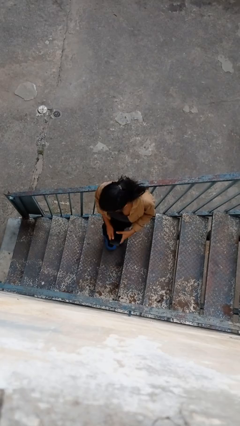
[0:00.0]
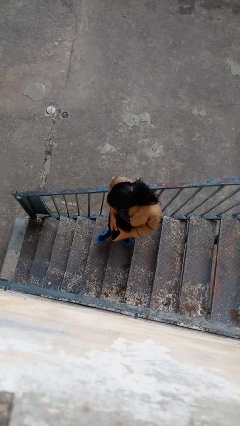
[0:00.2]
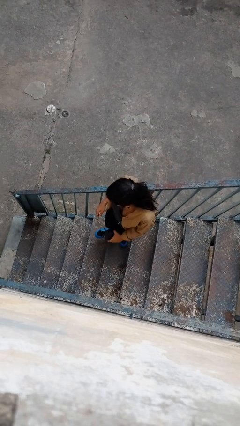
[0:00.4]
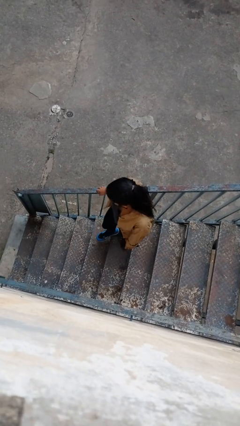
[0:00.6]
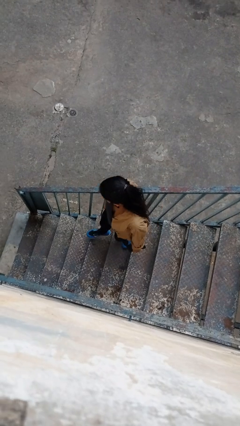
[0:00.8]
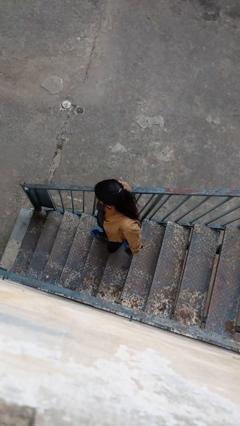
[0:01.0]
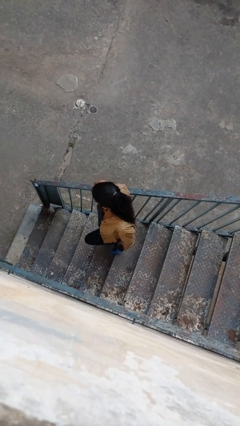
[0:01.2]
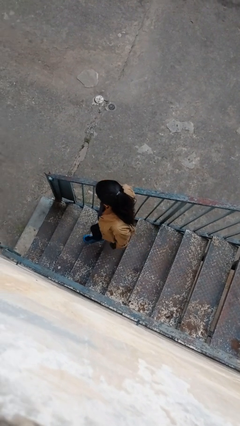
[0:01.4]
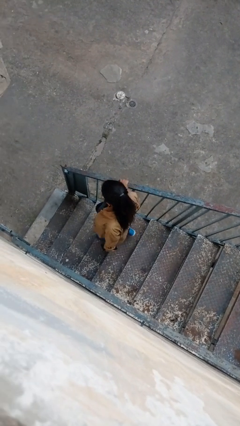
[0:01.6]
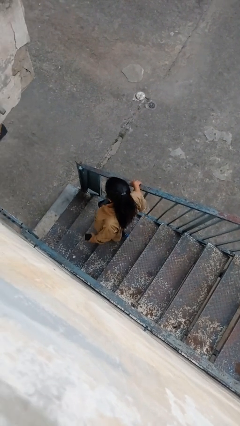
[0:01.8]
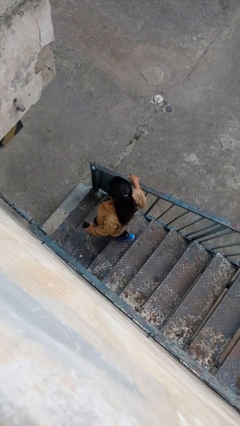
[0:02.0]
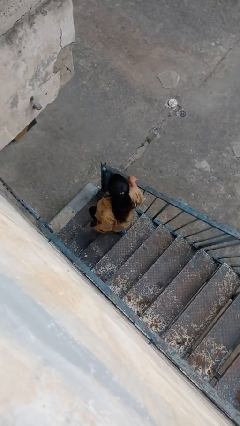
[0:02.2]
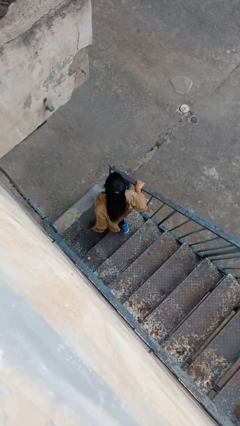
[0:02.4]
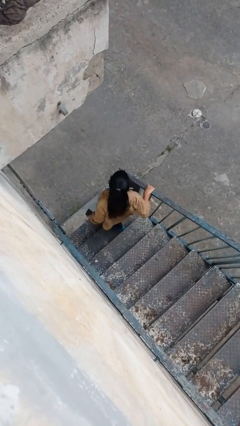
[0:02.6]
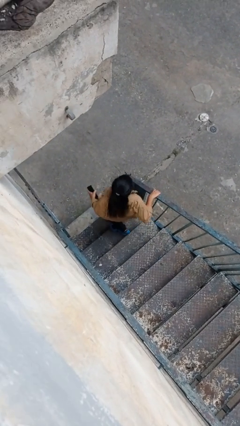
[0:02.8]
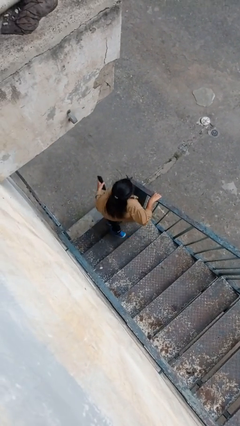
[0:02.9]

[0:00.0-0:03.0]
person climbs down stairs

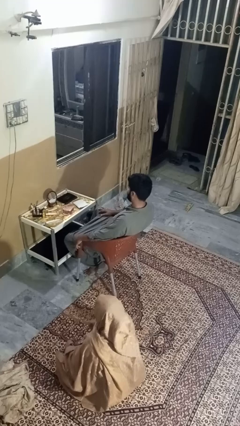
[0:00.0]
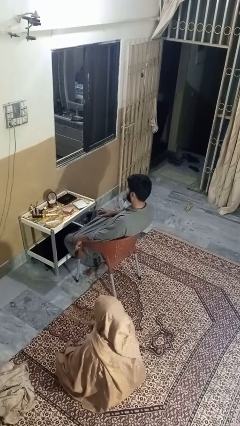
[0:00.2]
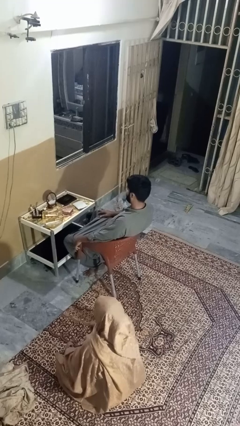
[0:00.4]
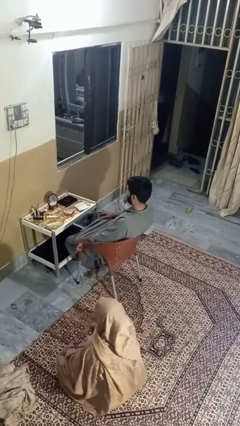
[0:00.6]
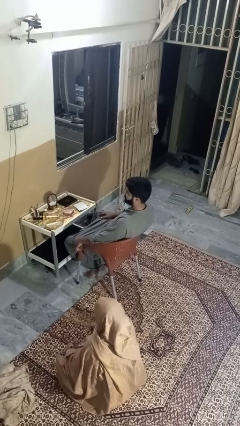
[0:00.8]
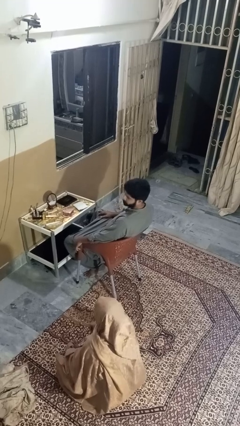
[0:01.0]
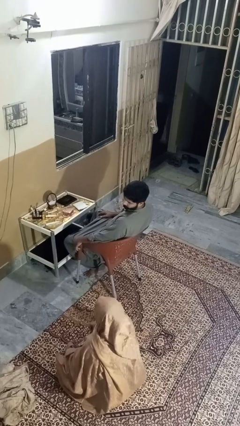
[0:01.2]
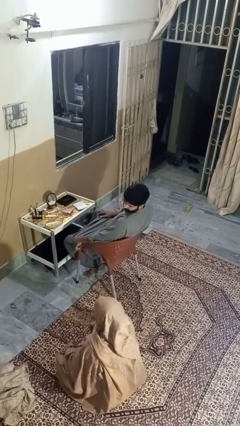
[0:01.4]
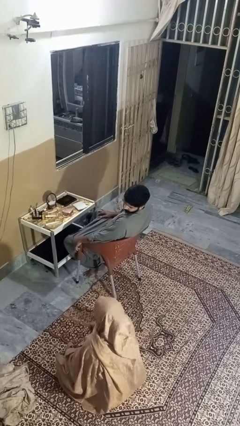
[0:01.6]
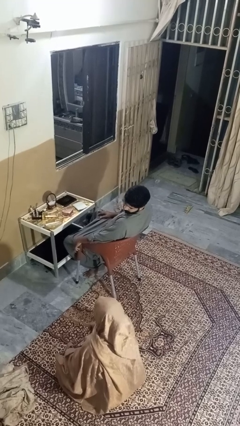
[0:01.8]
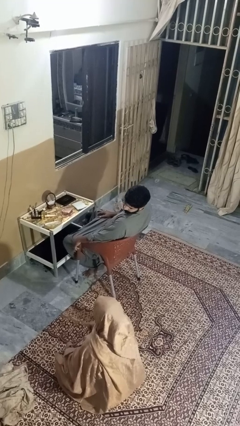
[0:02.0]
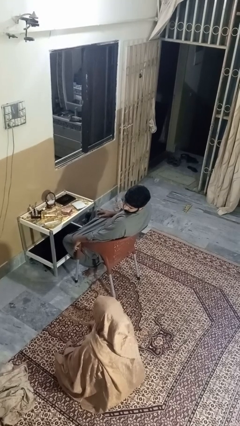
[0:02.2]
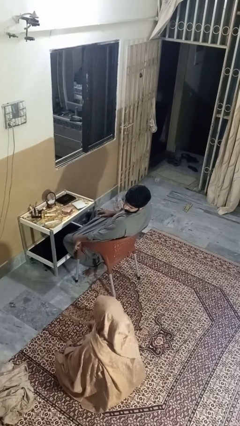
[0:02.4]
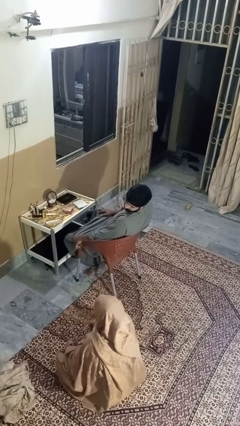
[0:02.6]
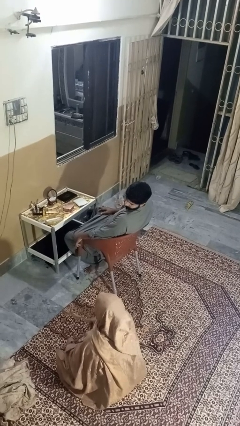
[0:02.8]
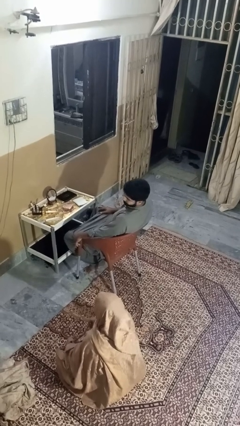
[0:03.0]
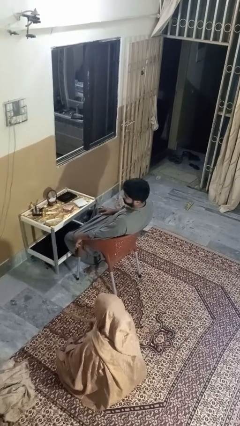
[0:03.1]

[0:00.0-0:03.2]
person looks over shoulder

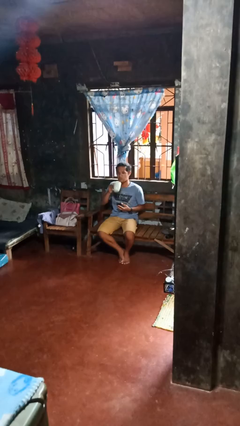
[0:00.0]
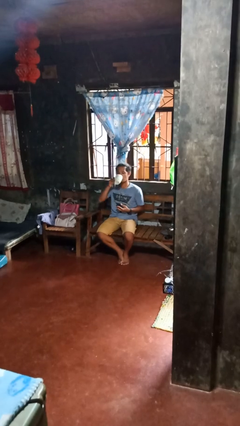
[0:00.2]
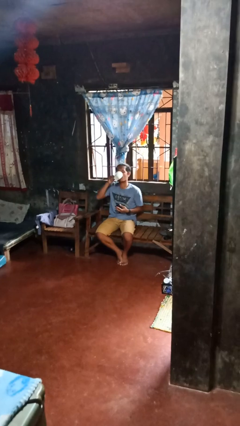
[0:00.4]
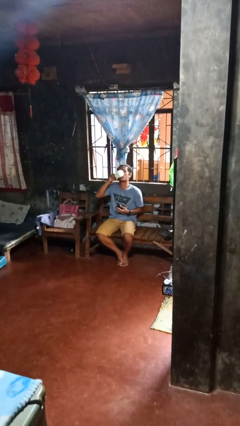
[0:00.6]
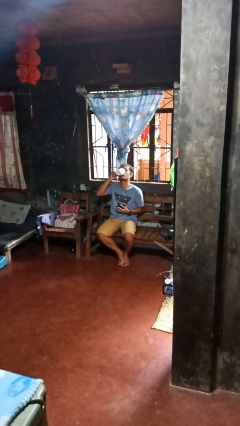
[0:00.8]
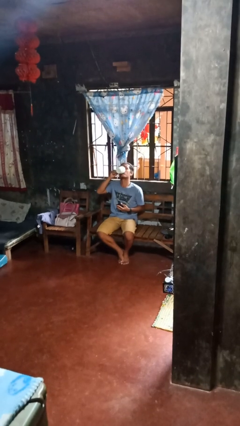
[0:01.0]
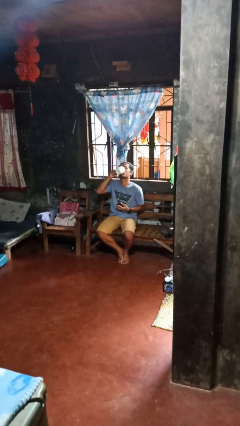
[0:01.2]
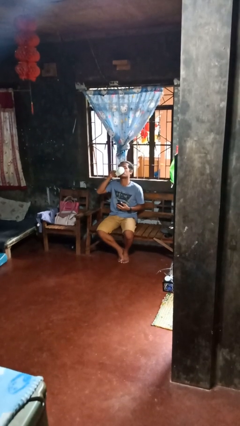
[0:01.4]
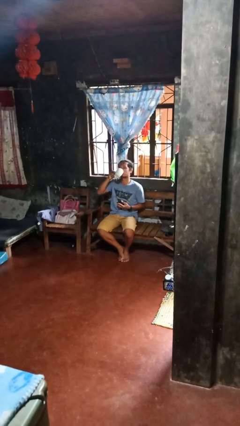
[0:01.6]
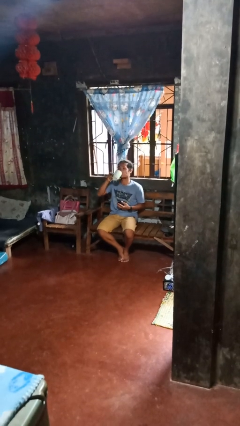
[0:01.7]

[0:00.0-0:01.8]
person drinks from cup

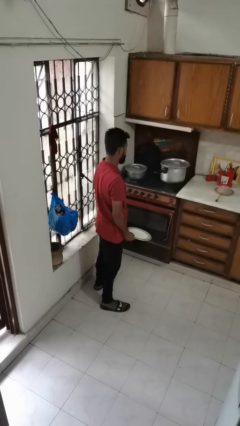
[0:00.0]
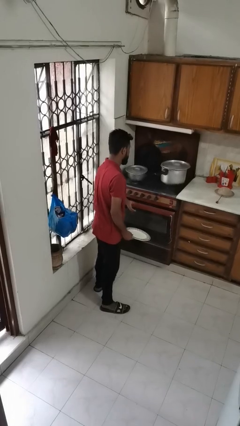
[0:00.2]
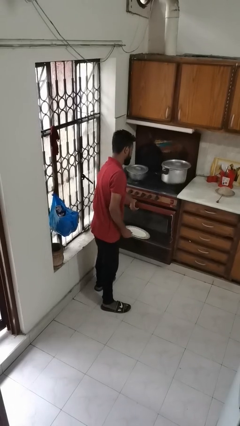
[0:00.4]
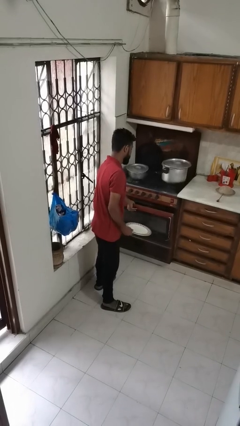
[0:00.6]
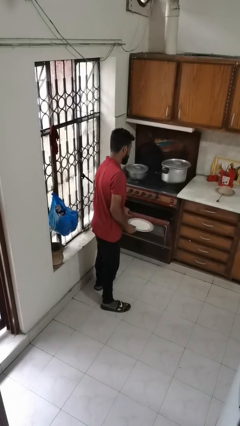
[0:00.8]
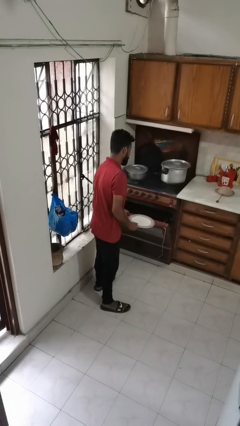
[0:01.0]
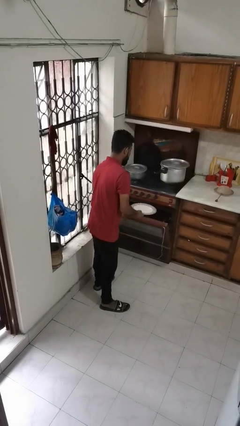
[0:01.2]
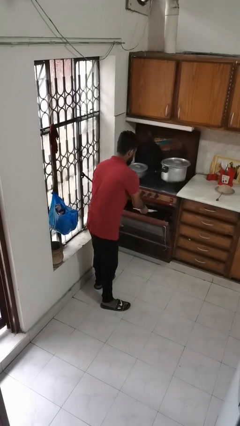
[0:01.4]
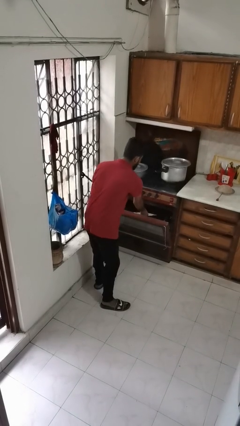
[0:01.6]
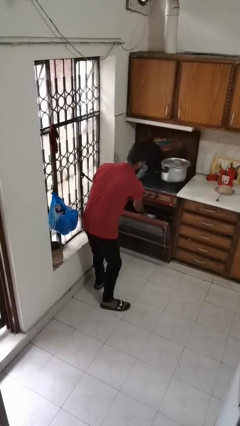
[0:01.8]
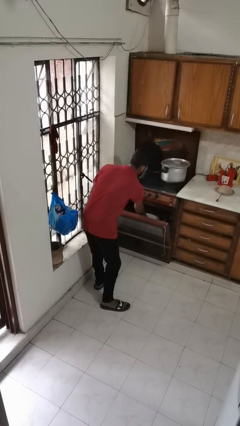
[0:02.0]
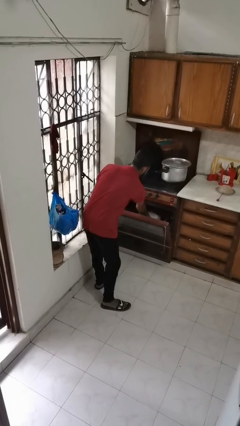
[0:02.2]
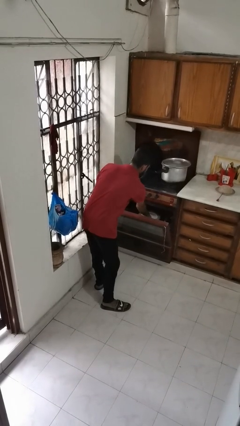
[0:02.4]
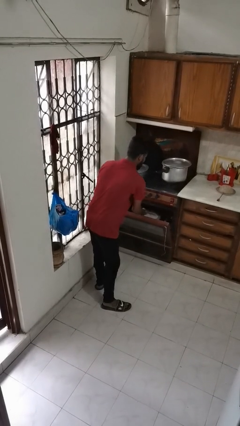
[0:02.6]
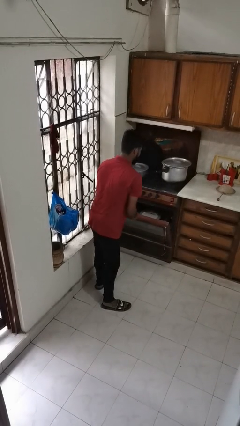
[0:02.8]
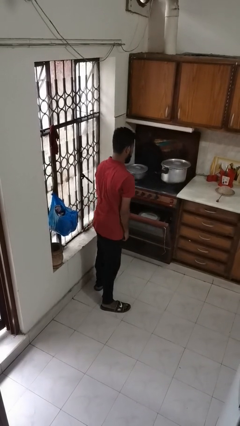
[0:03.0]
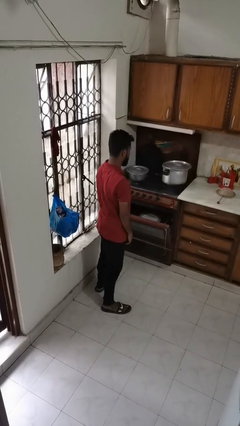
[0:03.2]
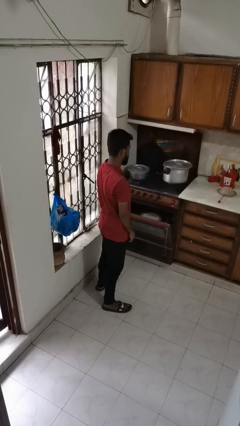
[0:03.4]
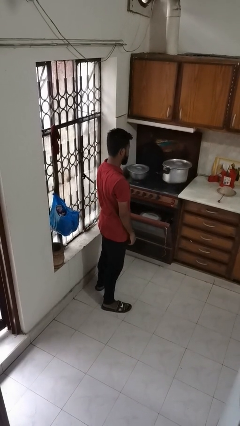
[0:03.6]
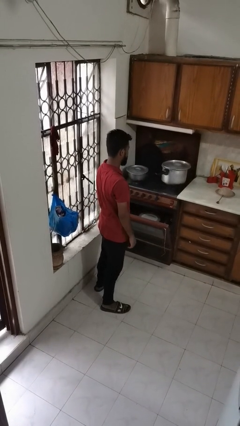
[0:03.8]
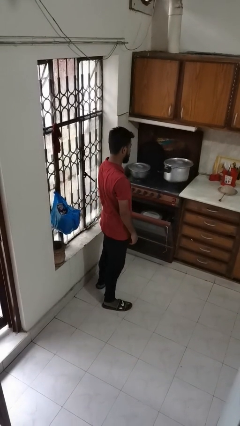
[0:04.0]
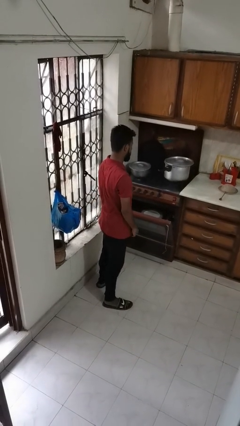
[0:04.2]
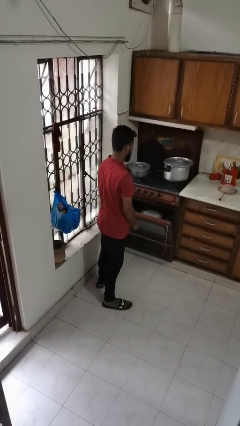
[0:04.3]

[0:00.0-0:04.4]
person puts object into oven

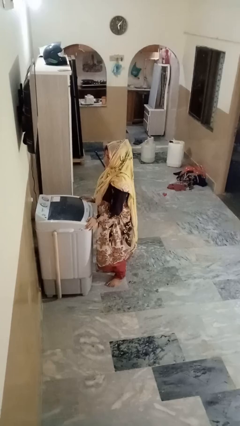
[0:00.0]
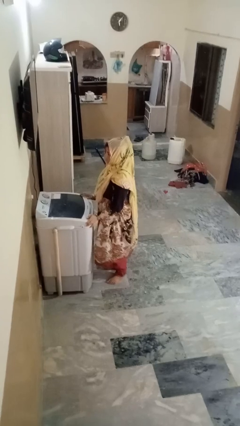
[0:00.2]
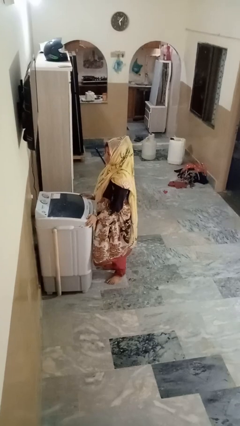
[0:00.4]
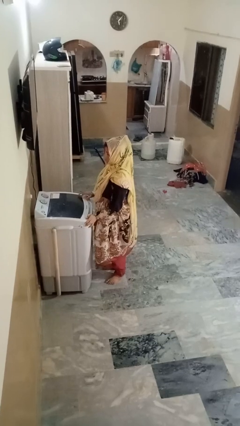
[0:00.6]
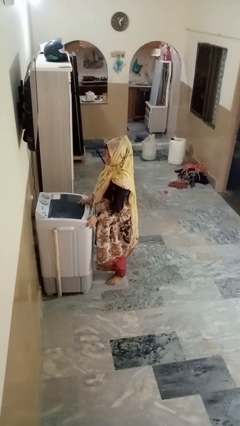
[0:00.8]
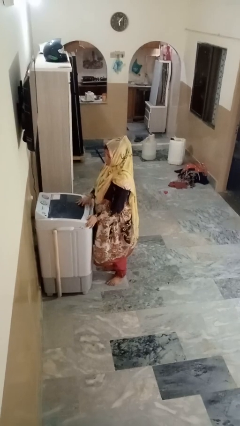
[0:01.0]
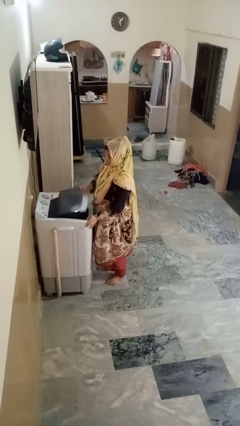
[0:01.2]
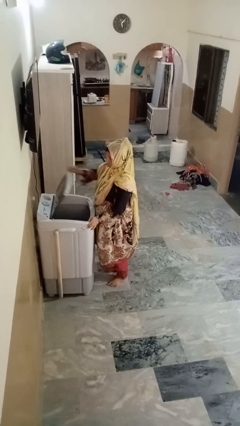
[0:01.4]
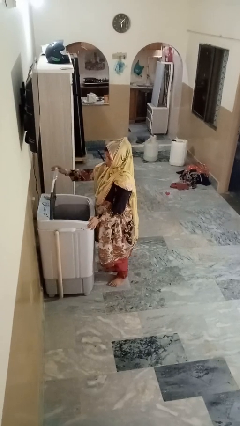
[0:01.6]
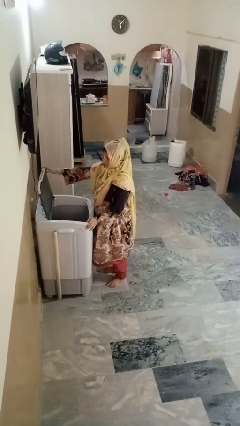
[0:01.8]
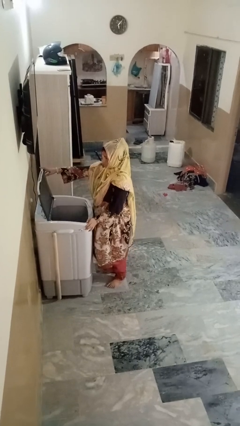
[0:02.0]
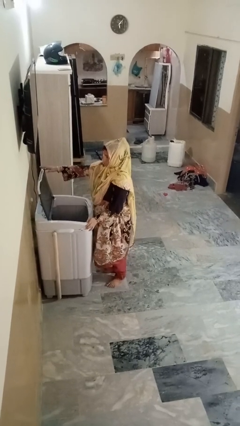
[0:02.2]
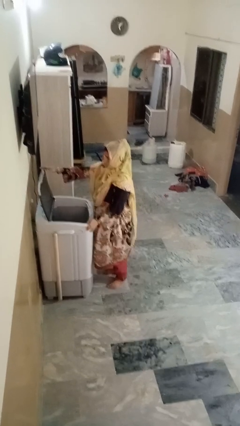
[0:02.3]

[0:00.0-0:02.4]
person opens clothes washer

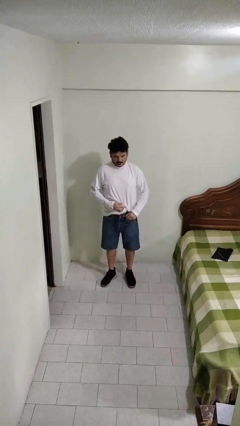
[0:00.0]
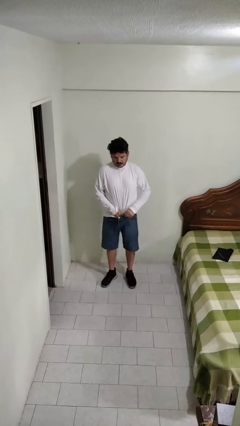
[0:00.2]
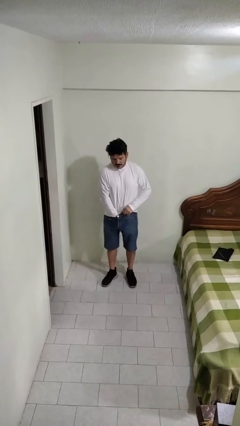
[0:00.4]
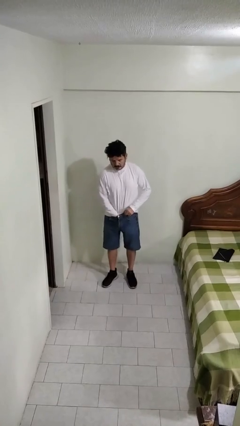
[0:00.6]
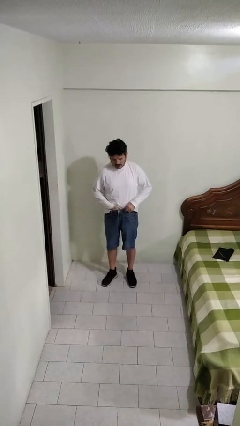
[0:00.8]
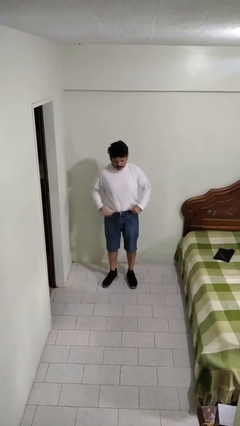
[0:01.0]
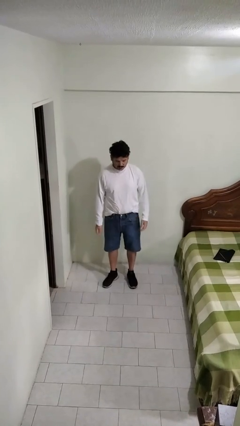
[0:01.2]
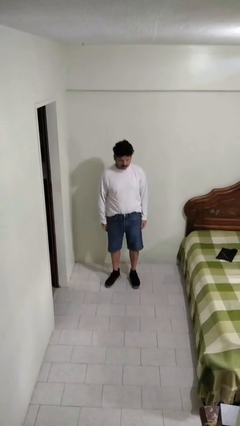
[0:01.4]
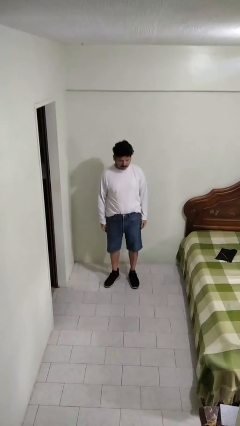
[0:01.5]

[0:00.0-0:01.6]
person tucks in shirt

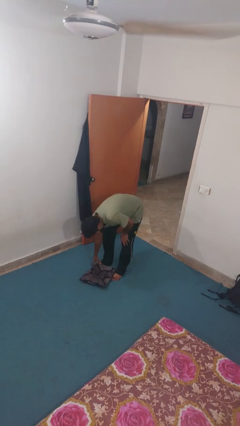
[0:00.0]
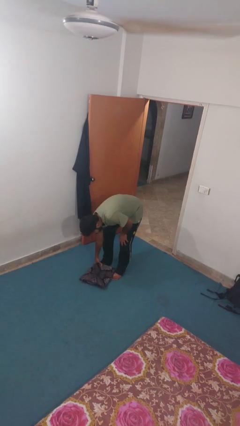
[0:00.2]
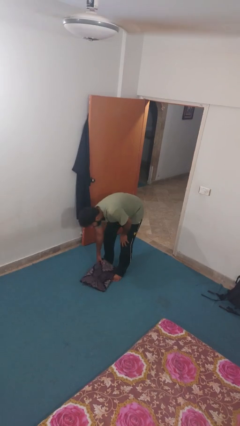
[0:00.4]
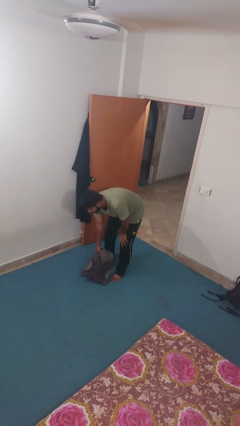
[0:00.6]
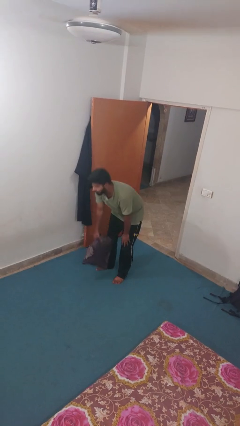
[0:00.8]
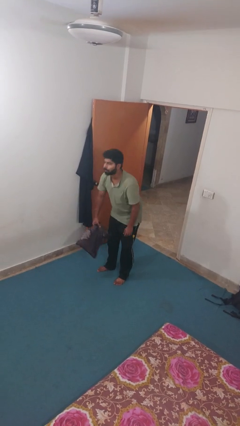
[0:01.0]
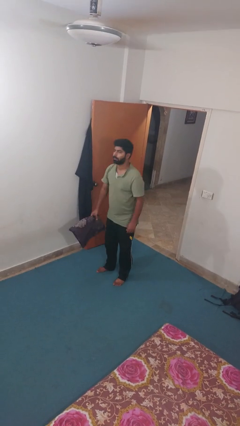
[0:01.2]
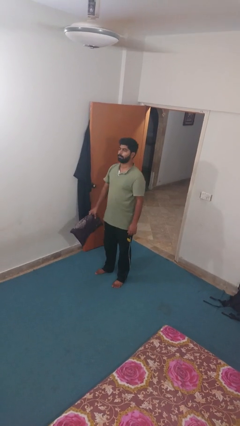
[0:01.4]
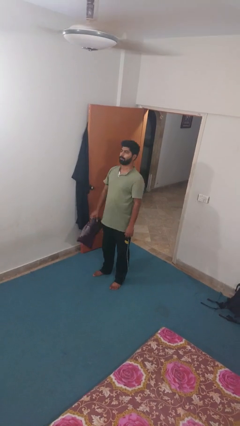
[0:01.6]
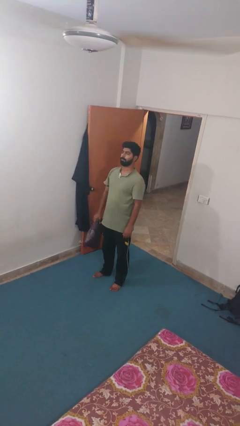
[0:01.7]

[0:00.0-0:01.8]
person picks up object from floor
